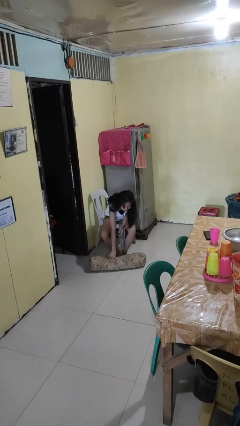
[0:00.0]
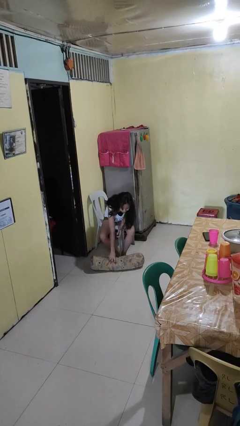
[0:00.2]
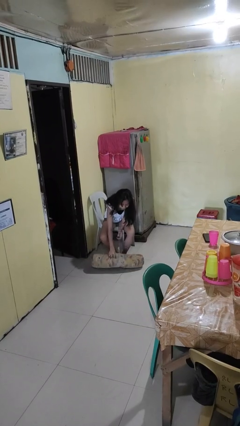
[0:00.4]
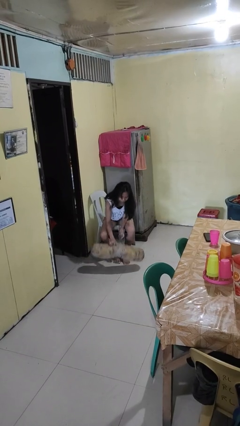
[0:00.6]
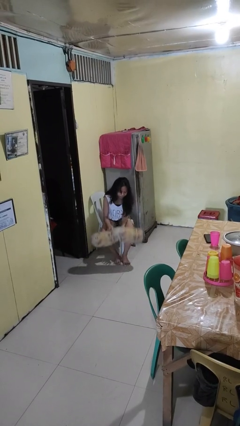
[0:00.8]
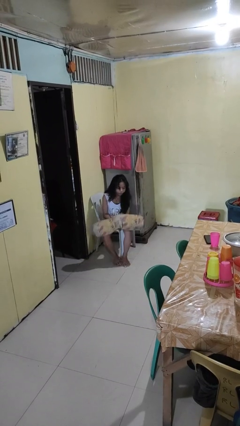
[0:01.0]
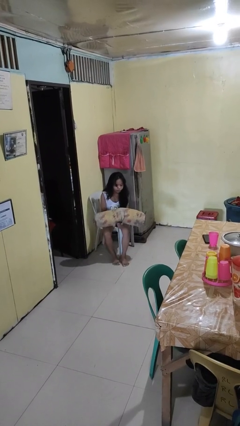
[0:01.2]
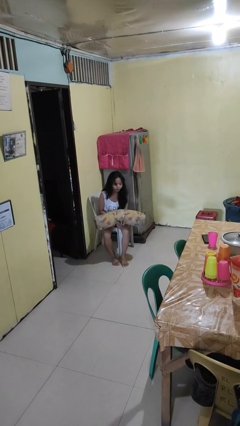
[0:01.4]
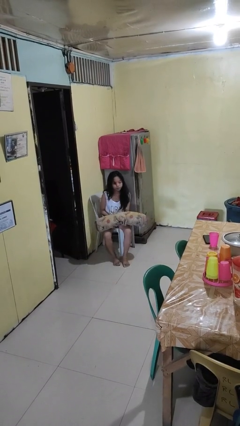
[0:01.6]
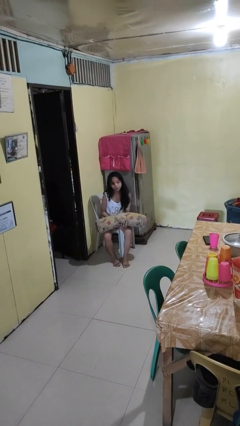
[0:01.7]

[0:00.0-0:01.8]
person picks up object from floor

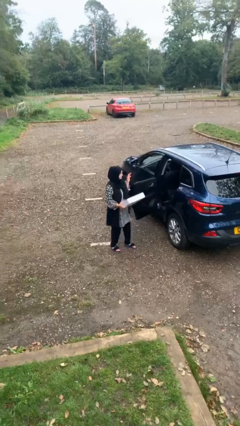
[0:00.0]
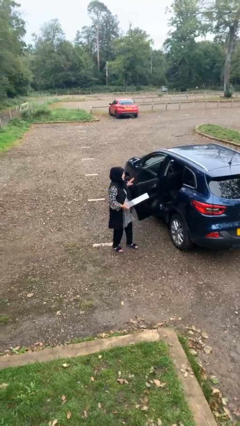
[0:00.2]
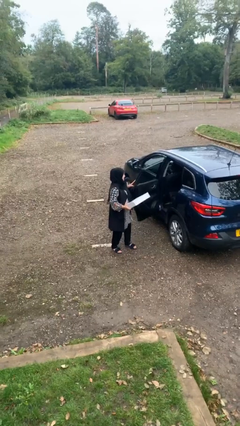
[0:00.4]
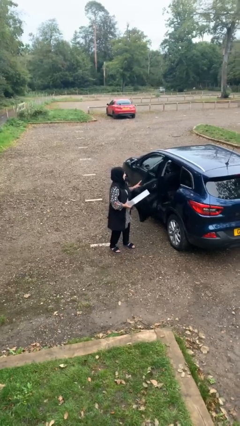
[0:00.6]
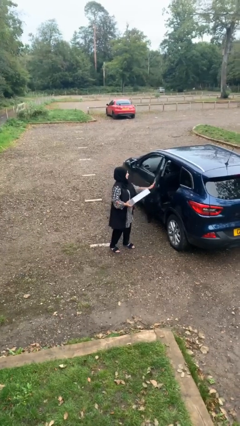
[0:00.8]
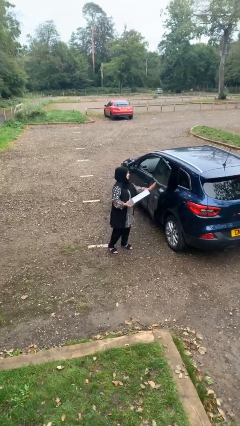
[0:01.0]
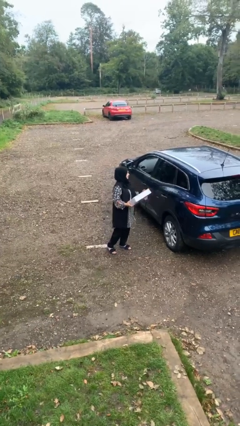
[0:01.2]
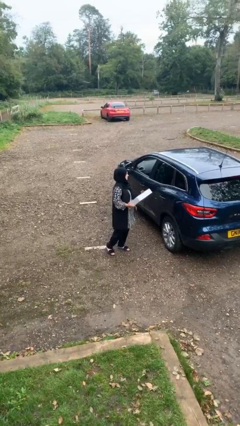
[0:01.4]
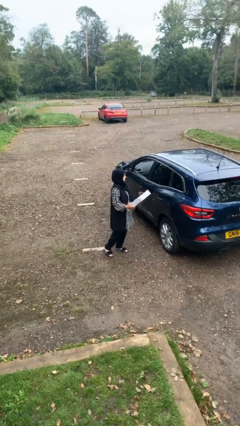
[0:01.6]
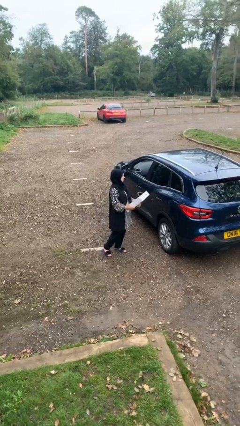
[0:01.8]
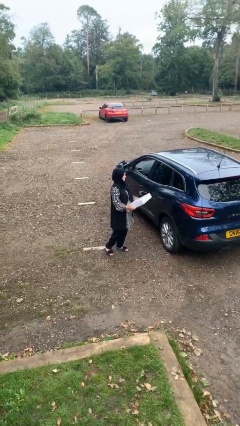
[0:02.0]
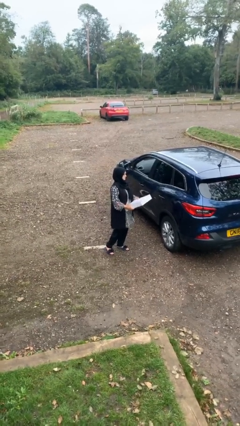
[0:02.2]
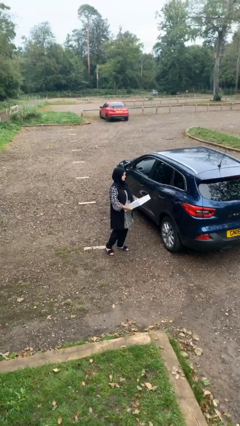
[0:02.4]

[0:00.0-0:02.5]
person closes car door

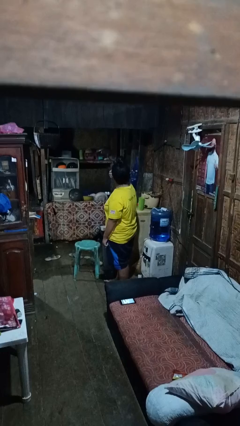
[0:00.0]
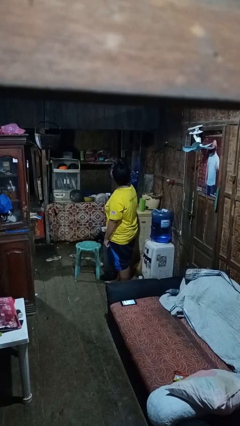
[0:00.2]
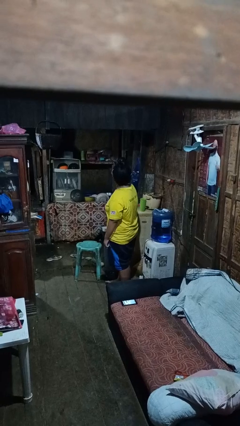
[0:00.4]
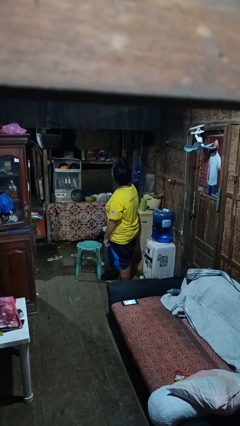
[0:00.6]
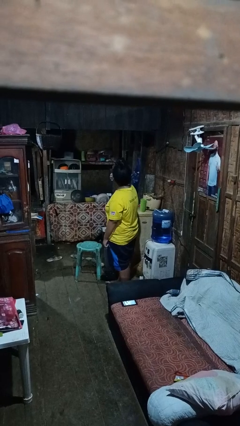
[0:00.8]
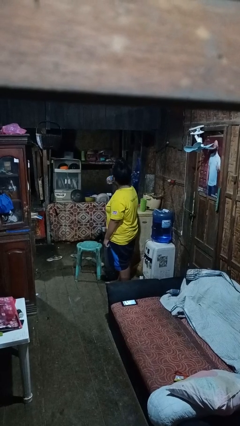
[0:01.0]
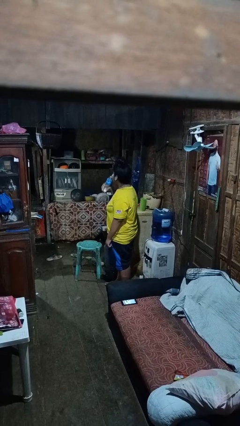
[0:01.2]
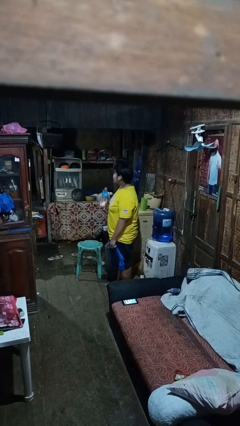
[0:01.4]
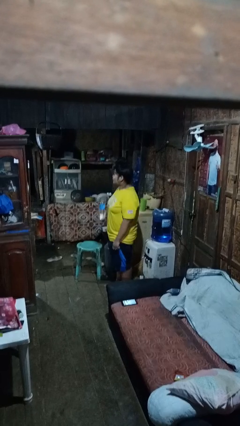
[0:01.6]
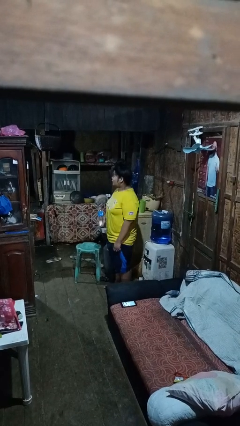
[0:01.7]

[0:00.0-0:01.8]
person drinks from bottle

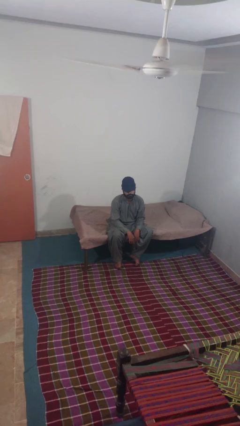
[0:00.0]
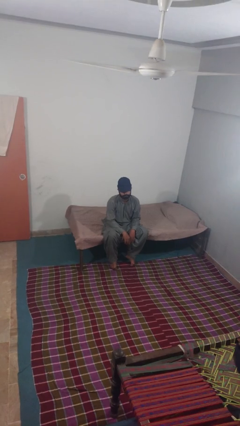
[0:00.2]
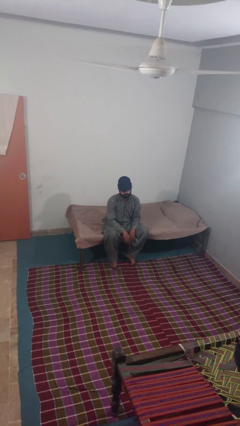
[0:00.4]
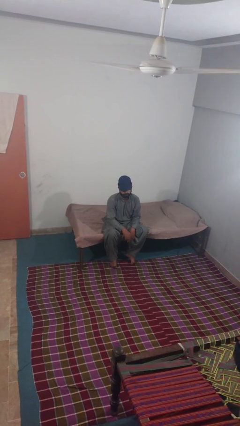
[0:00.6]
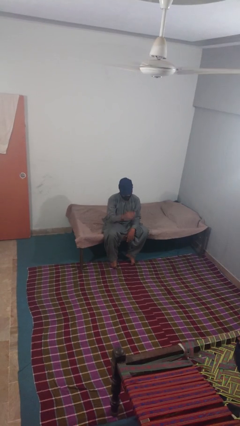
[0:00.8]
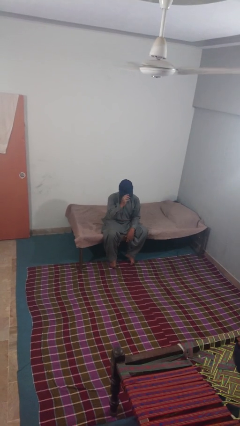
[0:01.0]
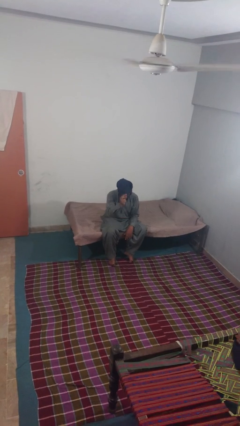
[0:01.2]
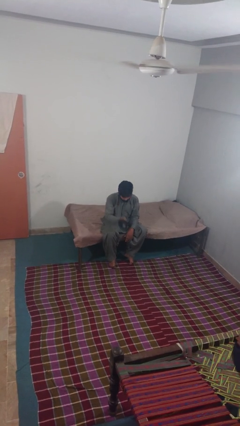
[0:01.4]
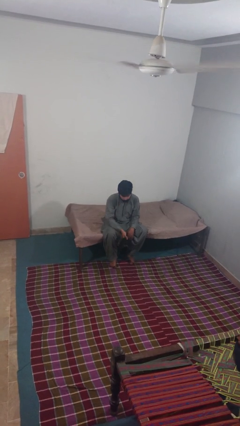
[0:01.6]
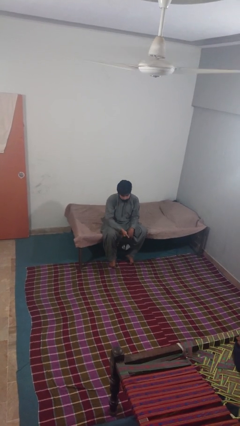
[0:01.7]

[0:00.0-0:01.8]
person takes off hat

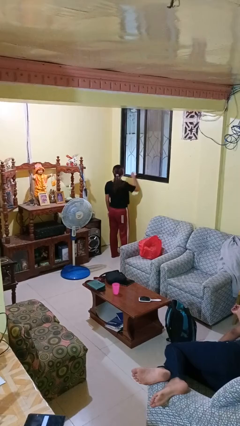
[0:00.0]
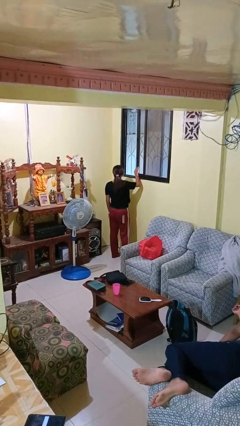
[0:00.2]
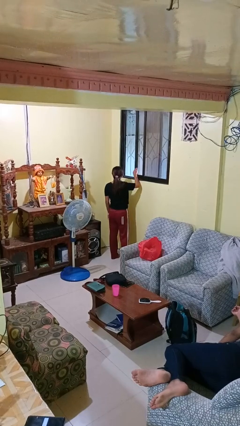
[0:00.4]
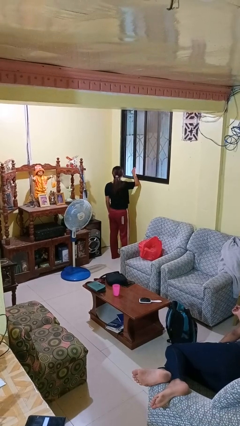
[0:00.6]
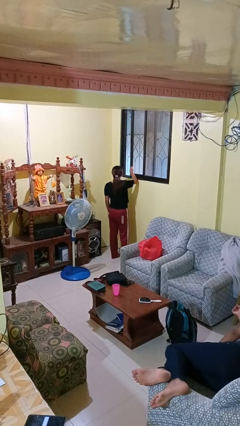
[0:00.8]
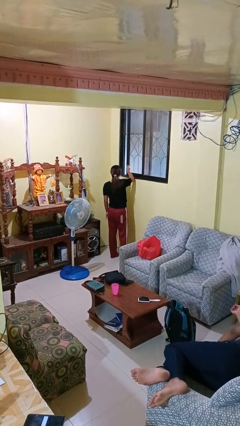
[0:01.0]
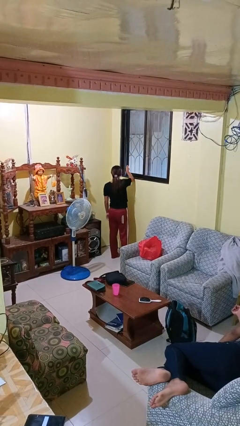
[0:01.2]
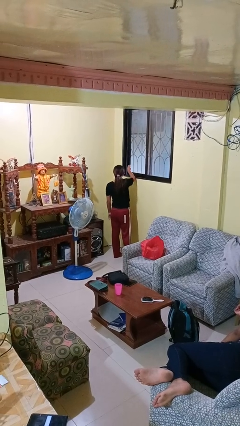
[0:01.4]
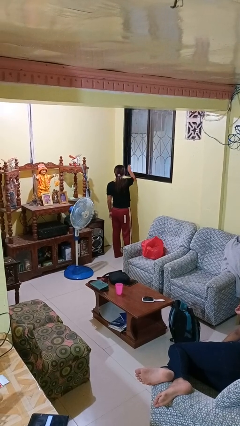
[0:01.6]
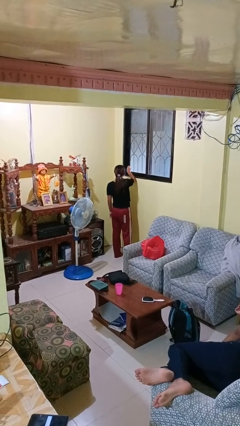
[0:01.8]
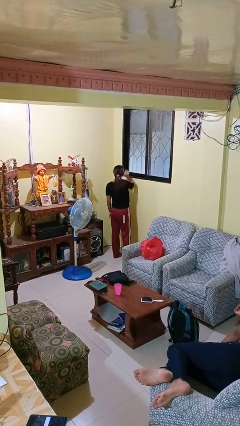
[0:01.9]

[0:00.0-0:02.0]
person closes home window

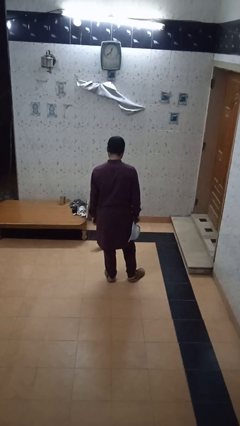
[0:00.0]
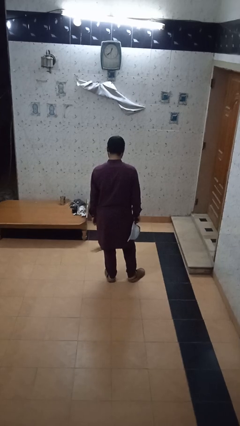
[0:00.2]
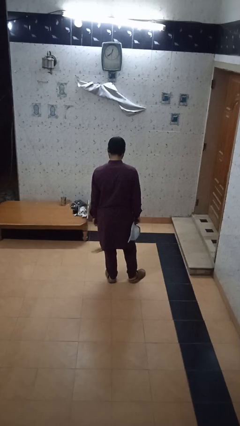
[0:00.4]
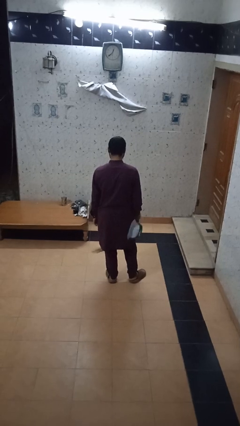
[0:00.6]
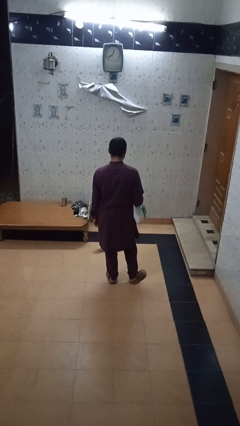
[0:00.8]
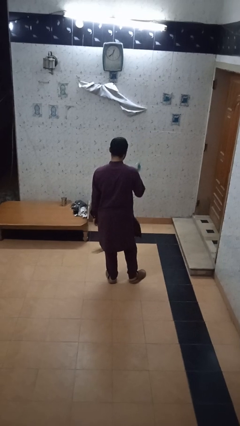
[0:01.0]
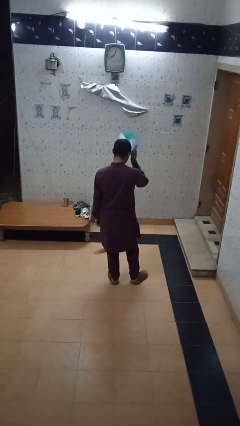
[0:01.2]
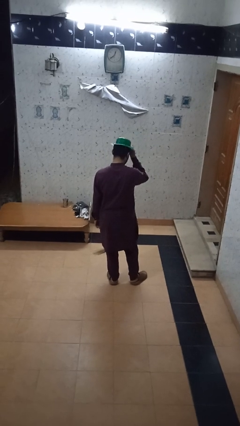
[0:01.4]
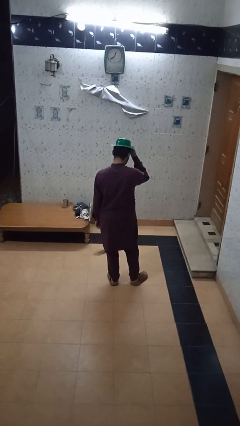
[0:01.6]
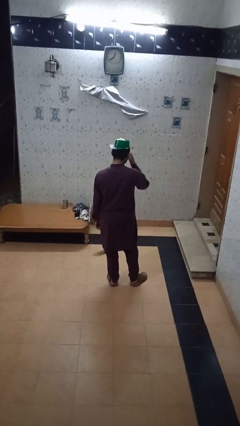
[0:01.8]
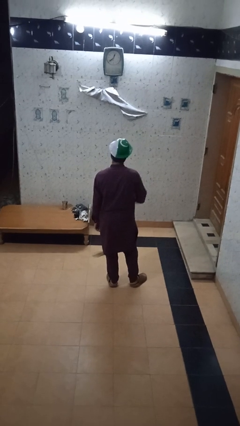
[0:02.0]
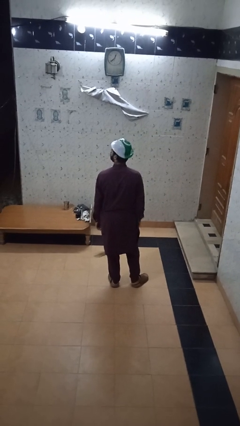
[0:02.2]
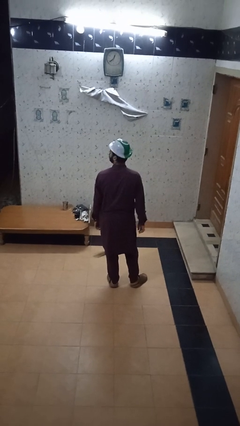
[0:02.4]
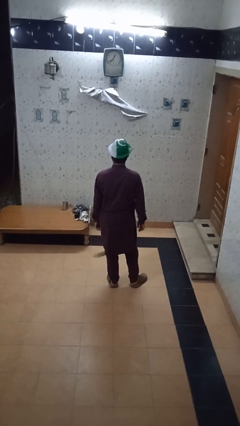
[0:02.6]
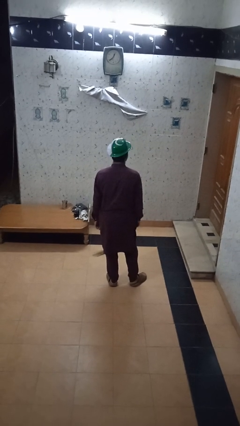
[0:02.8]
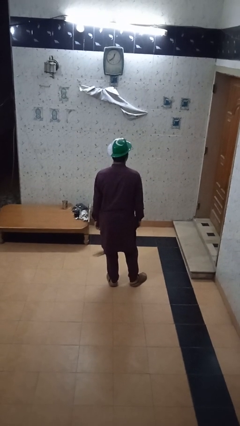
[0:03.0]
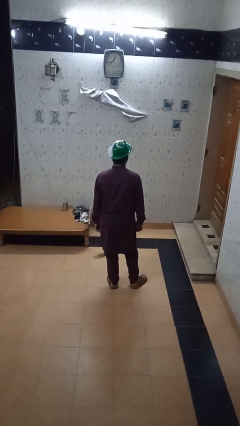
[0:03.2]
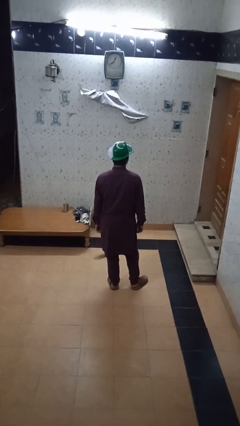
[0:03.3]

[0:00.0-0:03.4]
person puts on hat

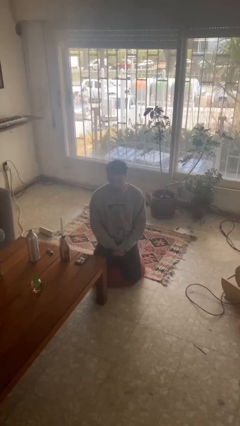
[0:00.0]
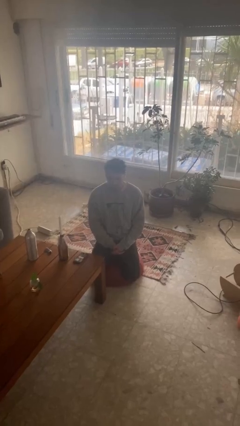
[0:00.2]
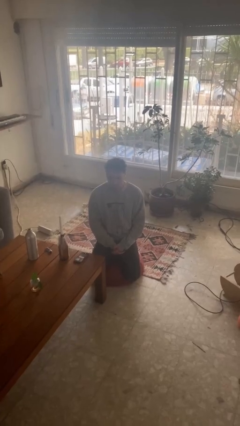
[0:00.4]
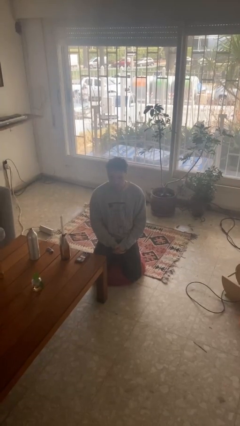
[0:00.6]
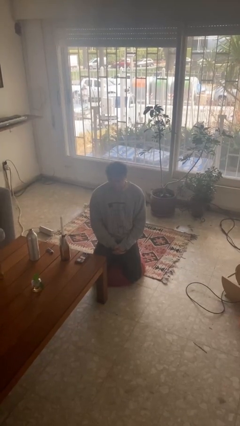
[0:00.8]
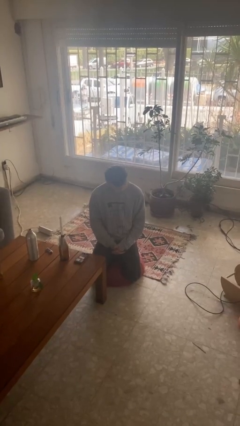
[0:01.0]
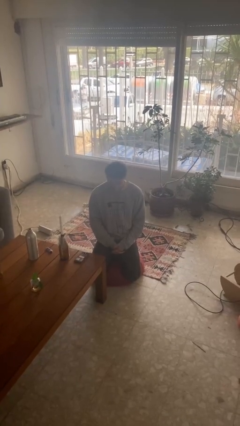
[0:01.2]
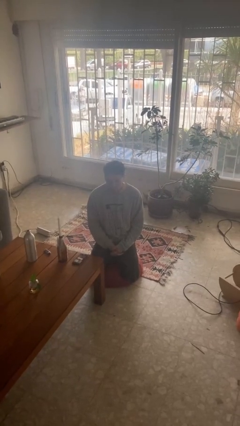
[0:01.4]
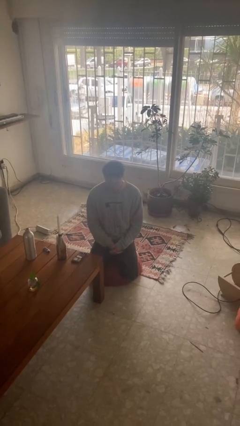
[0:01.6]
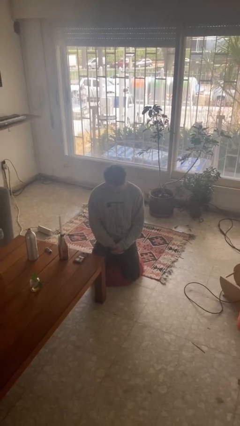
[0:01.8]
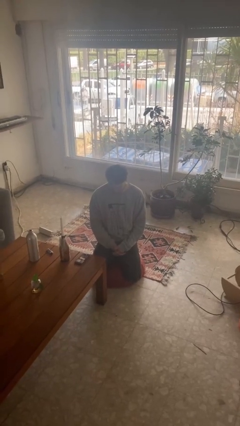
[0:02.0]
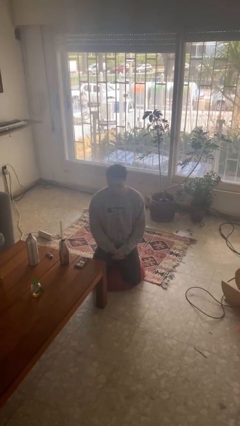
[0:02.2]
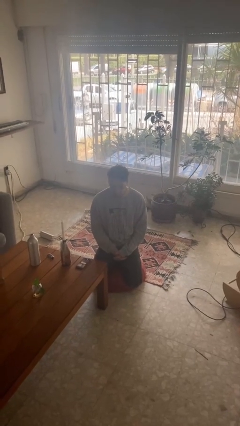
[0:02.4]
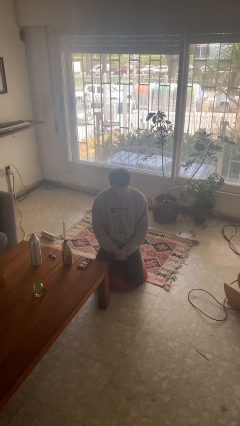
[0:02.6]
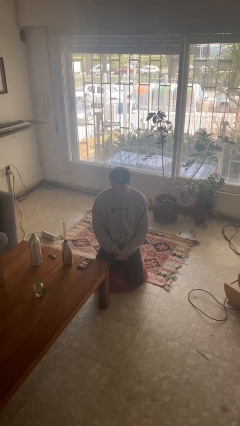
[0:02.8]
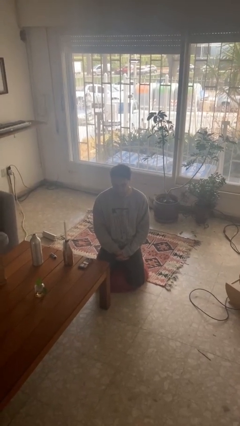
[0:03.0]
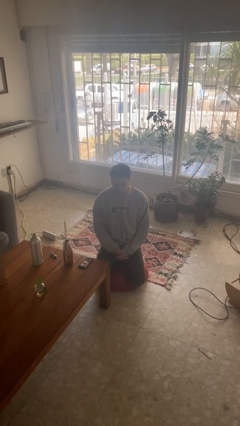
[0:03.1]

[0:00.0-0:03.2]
person nods head

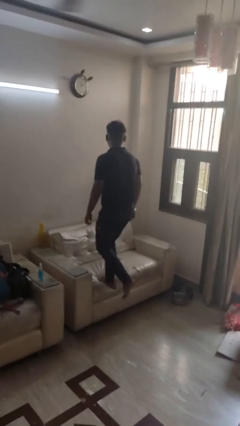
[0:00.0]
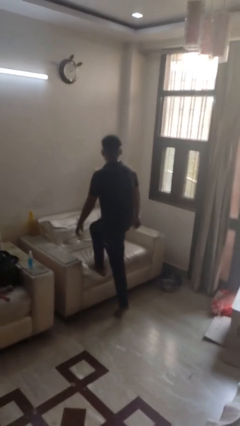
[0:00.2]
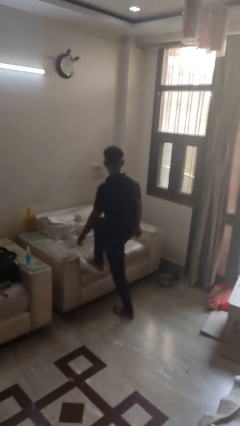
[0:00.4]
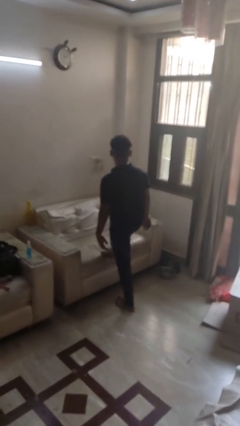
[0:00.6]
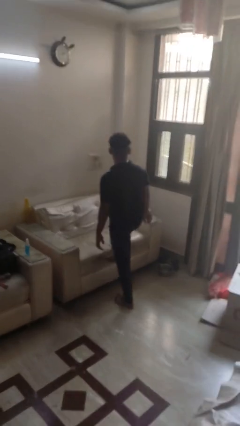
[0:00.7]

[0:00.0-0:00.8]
person climbs off couch
